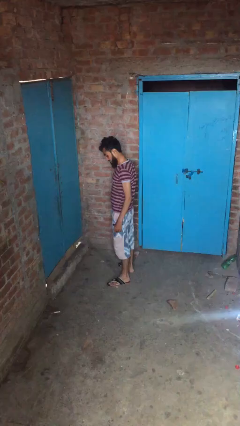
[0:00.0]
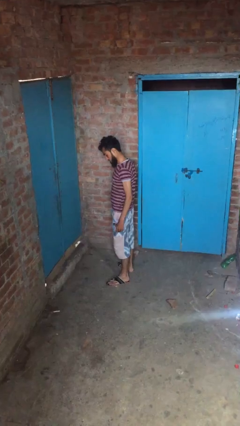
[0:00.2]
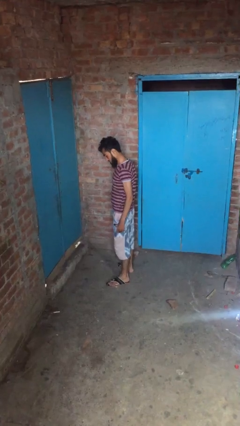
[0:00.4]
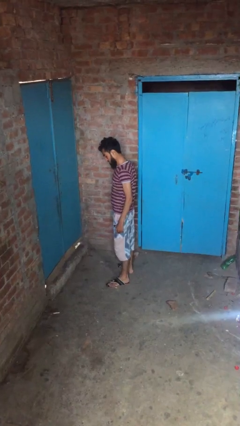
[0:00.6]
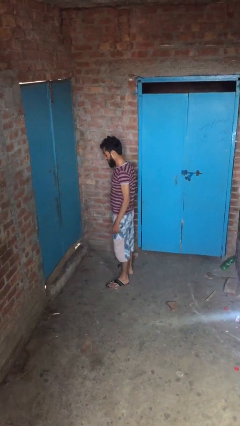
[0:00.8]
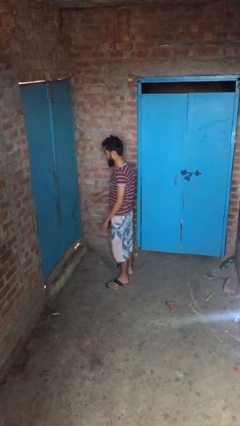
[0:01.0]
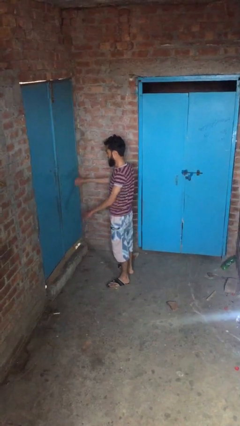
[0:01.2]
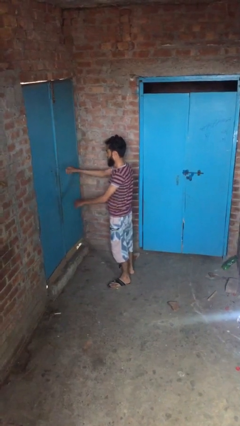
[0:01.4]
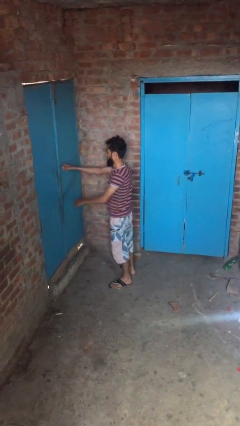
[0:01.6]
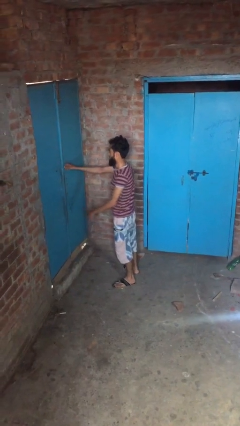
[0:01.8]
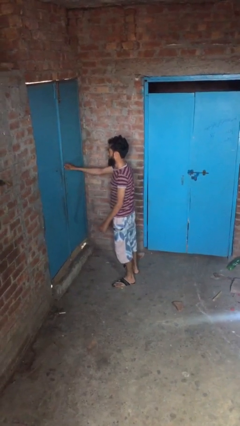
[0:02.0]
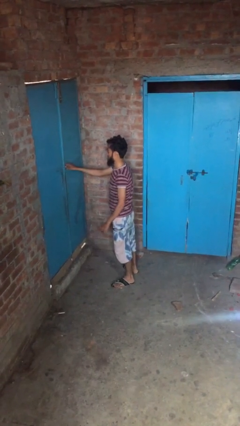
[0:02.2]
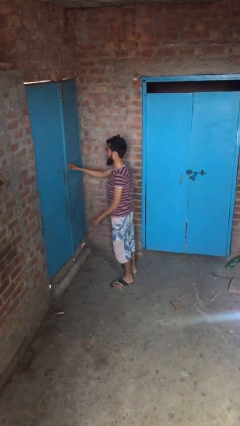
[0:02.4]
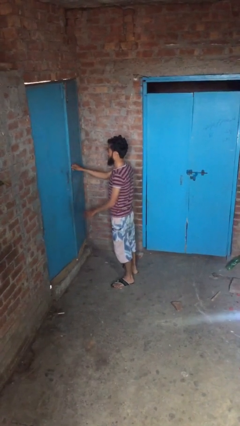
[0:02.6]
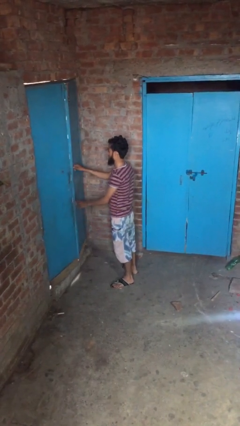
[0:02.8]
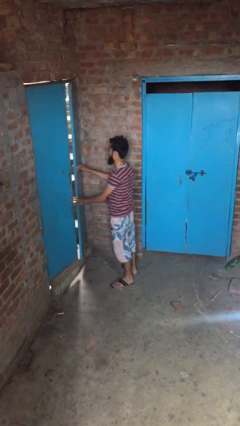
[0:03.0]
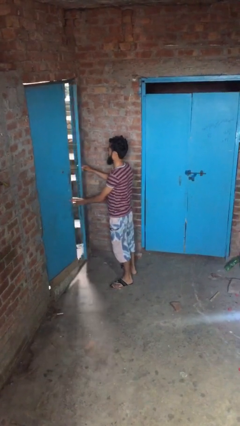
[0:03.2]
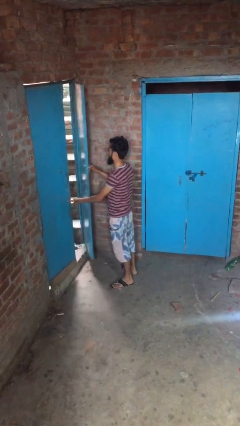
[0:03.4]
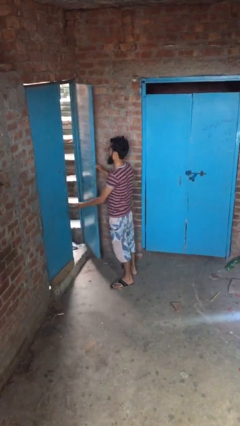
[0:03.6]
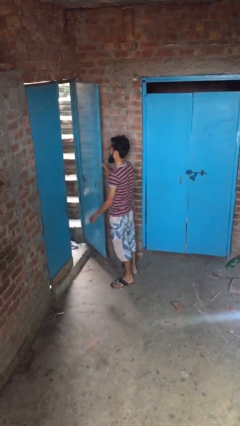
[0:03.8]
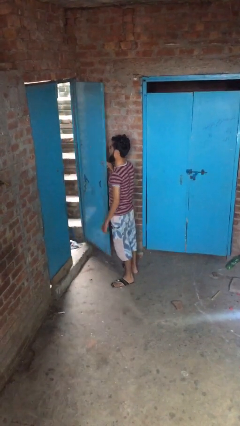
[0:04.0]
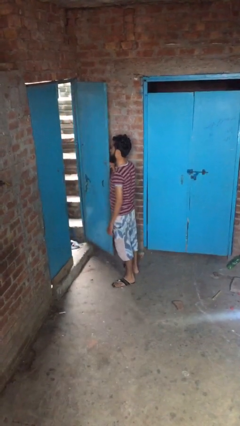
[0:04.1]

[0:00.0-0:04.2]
person opens facility door

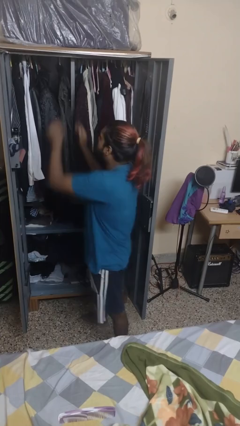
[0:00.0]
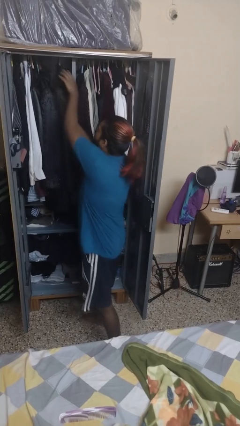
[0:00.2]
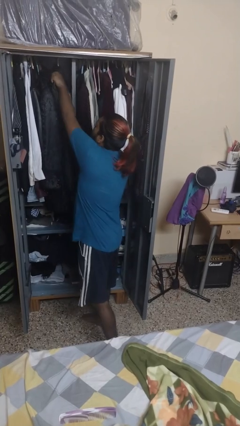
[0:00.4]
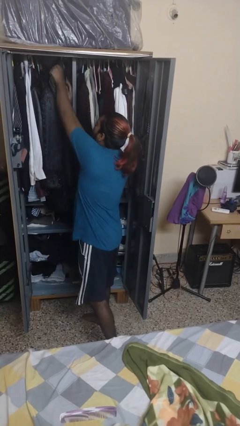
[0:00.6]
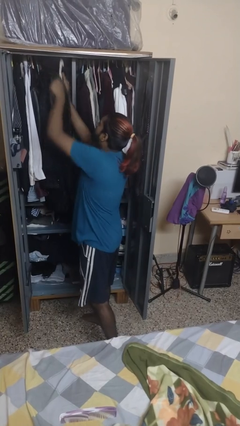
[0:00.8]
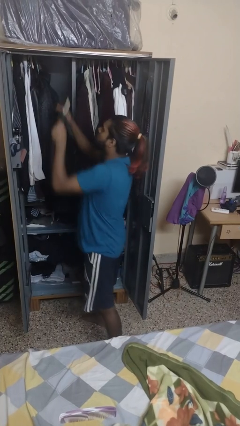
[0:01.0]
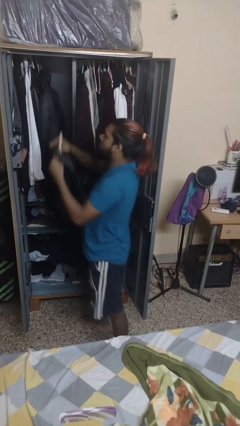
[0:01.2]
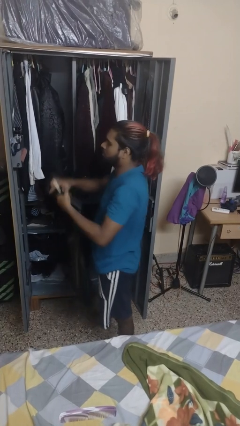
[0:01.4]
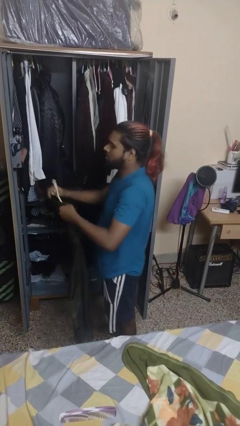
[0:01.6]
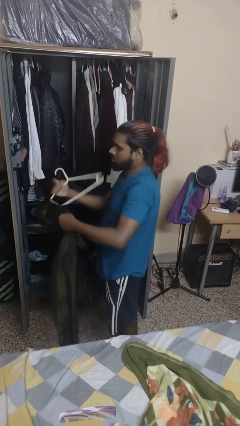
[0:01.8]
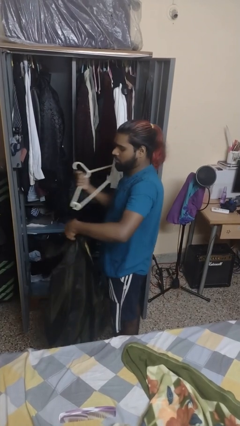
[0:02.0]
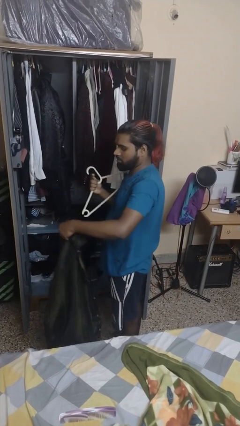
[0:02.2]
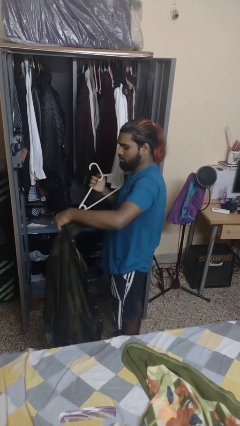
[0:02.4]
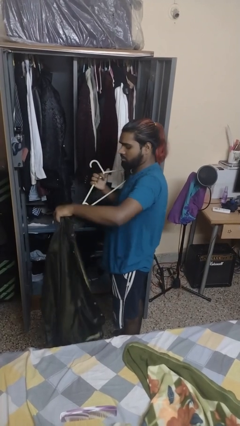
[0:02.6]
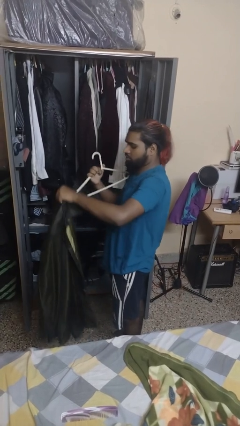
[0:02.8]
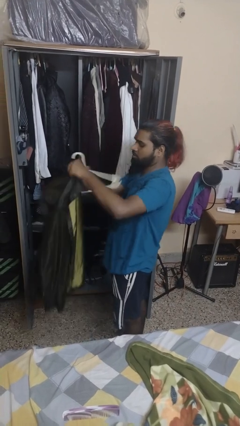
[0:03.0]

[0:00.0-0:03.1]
person takes clothes from dresser

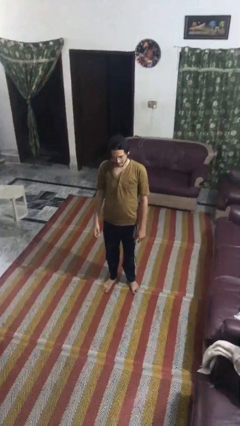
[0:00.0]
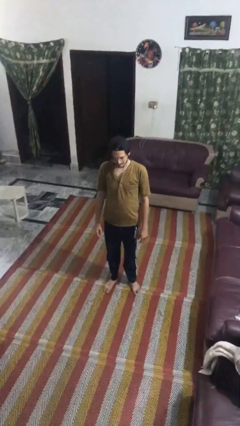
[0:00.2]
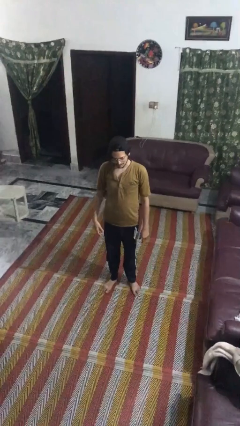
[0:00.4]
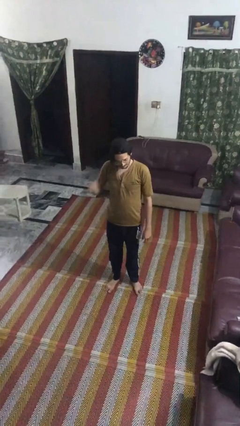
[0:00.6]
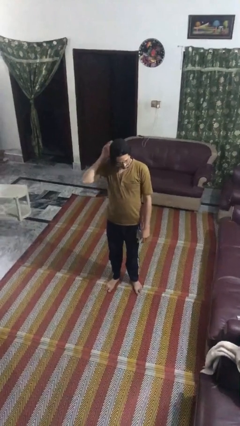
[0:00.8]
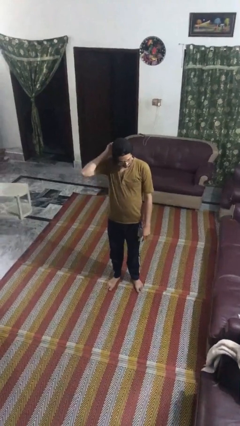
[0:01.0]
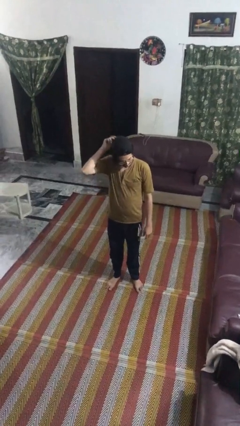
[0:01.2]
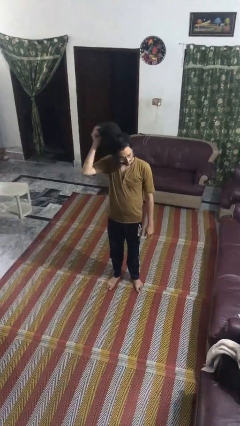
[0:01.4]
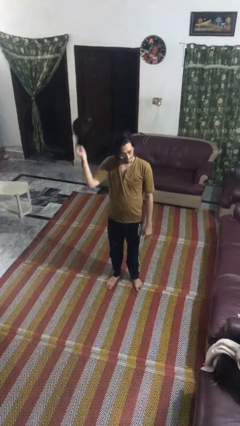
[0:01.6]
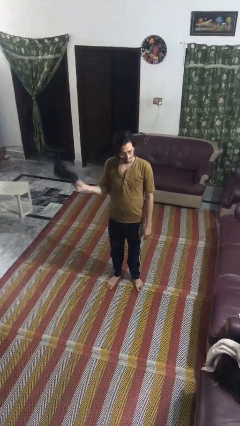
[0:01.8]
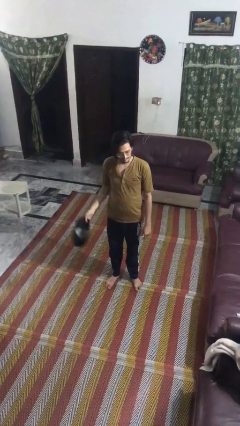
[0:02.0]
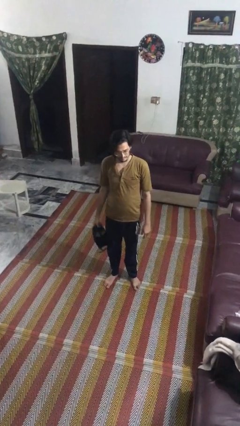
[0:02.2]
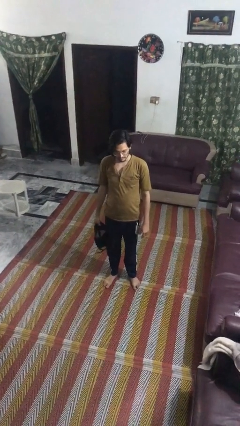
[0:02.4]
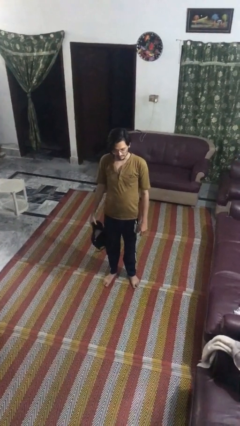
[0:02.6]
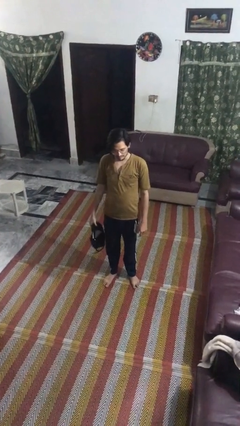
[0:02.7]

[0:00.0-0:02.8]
person takes off hat

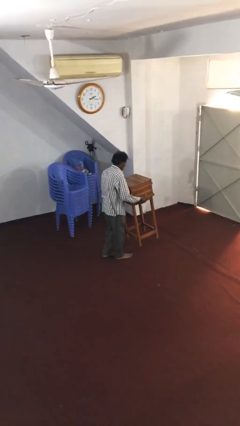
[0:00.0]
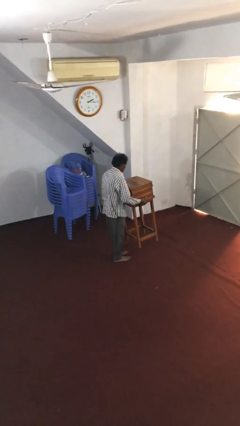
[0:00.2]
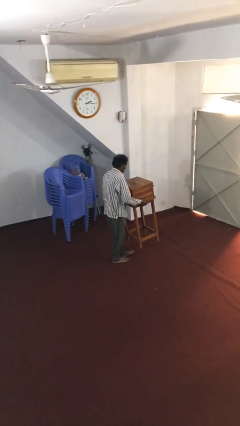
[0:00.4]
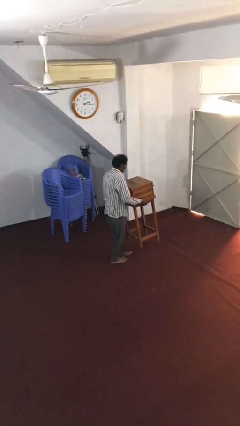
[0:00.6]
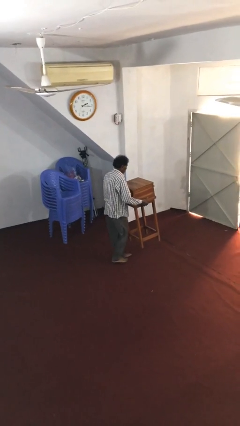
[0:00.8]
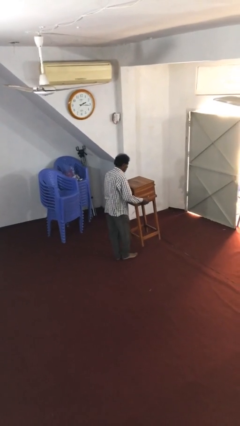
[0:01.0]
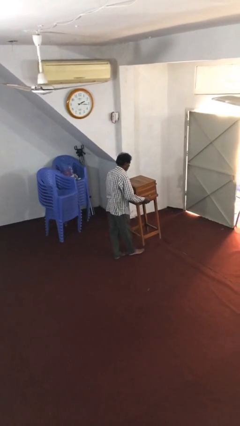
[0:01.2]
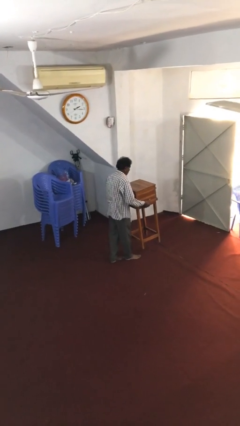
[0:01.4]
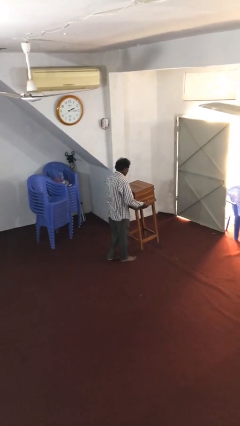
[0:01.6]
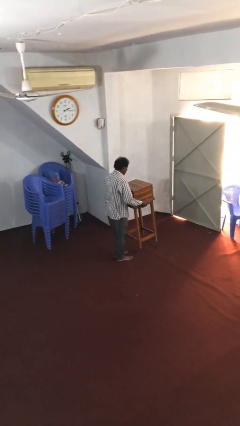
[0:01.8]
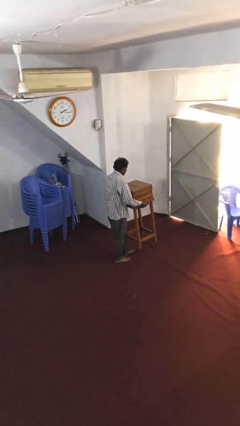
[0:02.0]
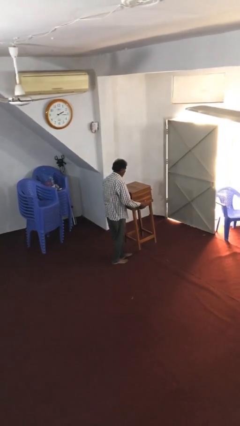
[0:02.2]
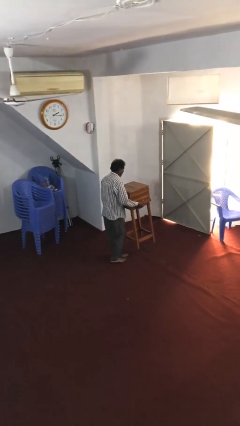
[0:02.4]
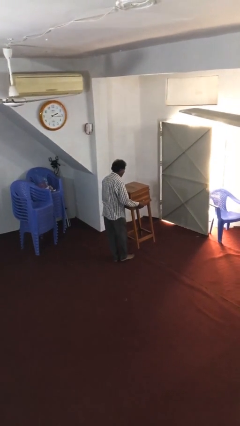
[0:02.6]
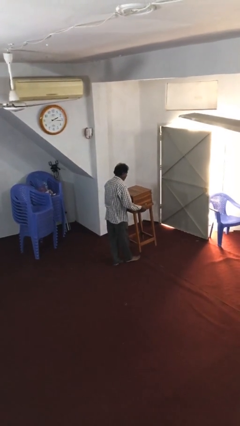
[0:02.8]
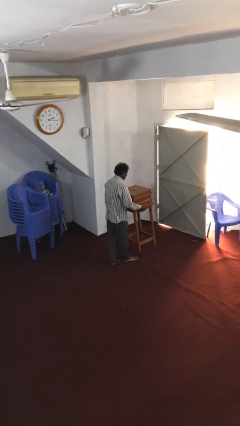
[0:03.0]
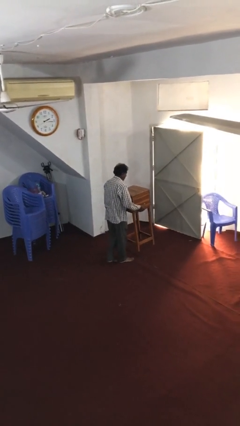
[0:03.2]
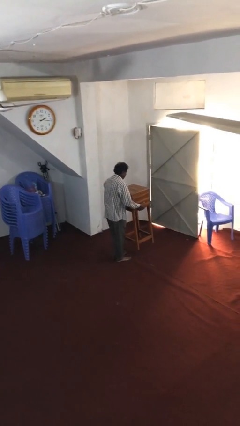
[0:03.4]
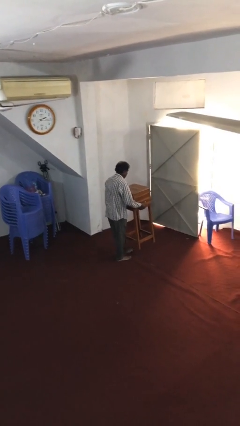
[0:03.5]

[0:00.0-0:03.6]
person carries heavy object

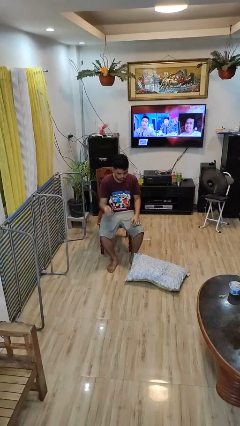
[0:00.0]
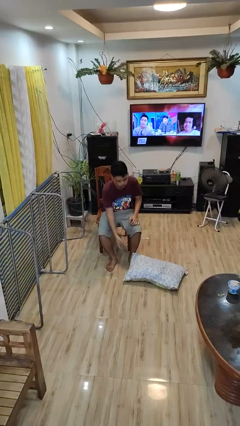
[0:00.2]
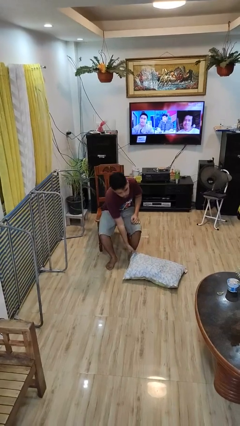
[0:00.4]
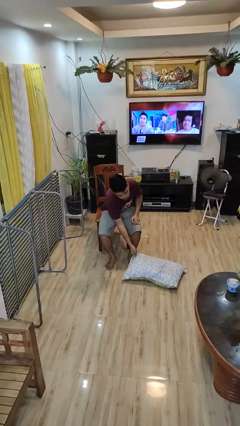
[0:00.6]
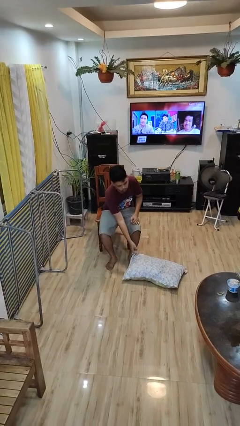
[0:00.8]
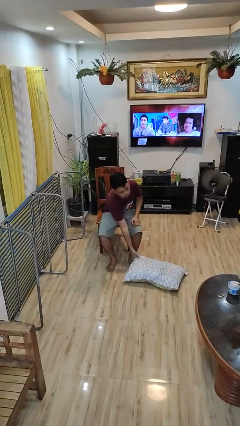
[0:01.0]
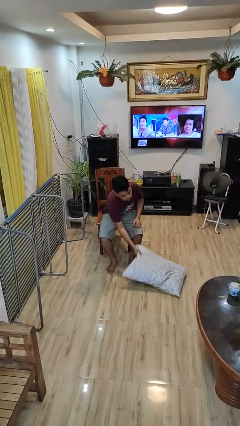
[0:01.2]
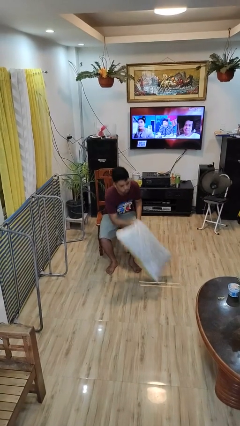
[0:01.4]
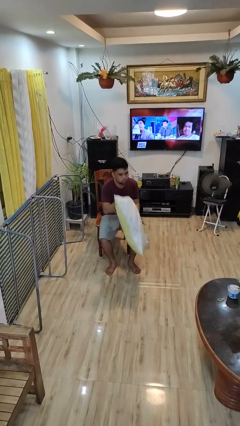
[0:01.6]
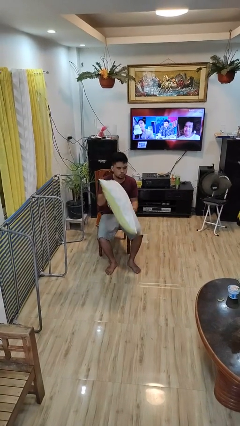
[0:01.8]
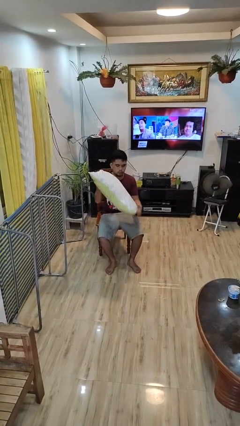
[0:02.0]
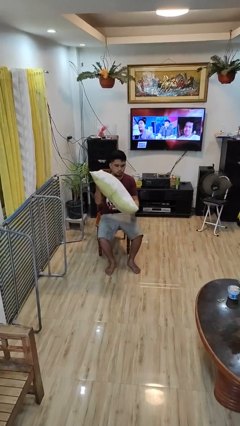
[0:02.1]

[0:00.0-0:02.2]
person picks up object from floor

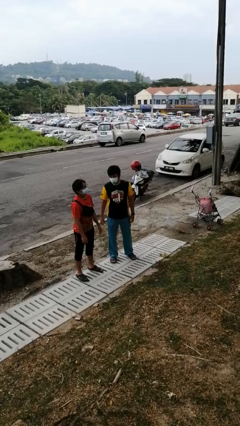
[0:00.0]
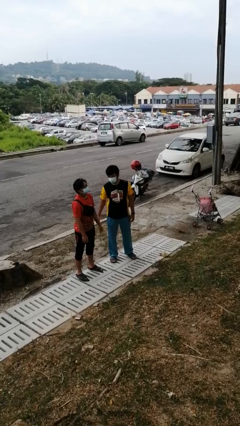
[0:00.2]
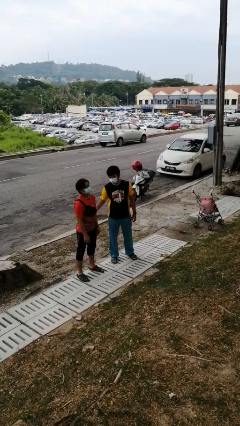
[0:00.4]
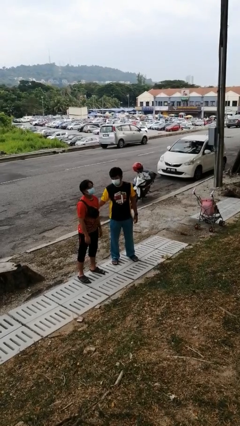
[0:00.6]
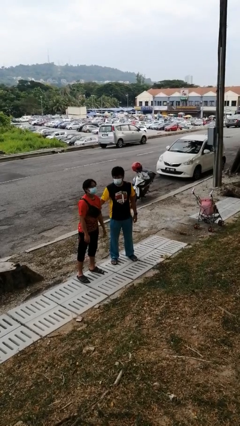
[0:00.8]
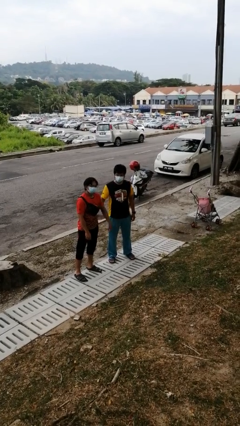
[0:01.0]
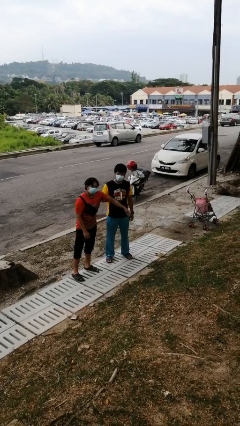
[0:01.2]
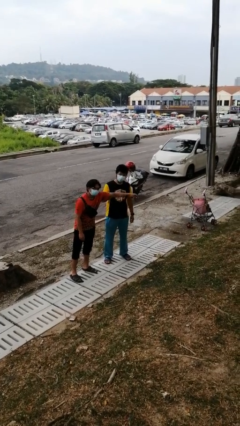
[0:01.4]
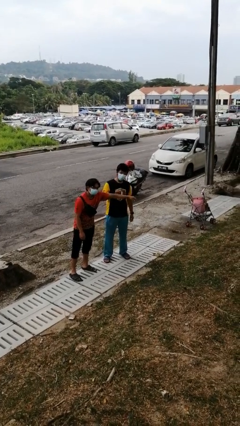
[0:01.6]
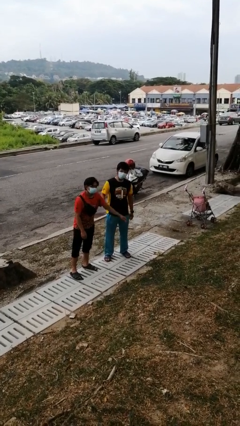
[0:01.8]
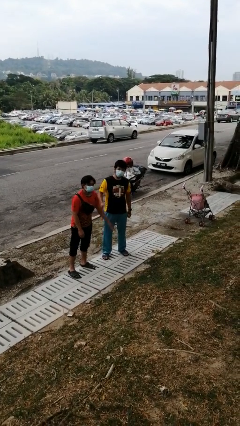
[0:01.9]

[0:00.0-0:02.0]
person grabs person by bicep
